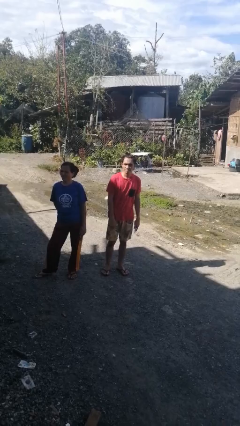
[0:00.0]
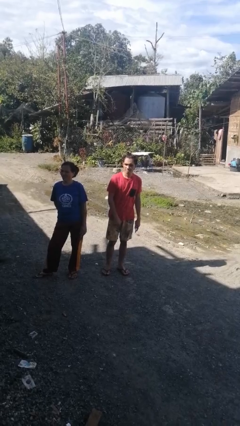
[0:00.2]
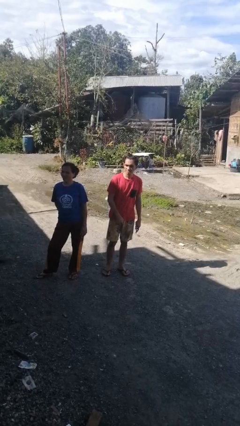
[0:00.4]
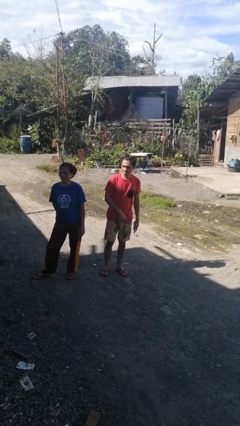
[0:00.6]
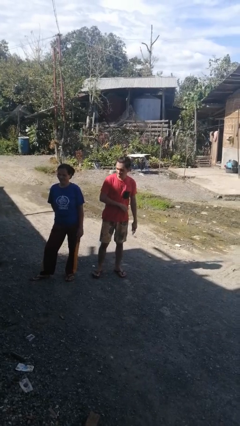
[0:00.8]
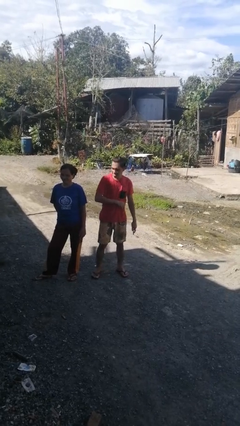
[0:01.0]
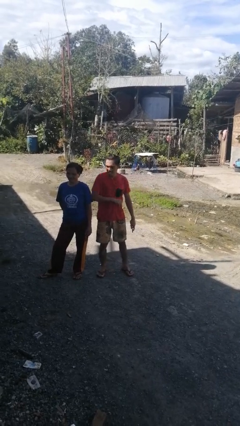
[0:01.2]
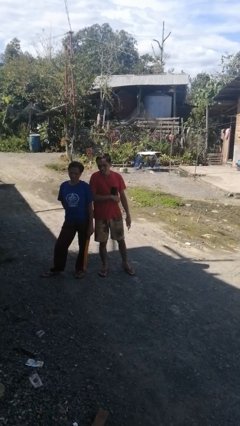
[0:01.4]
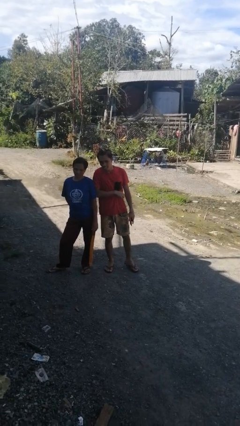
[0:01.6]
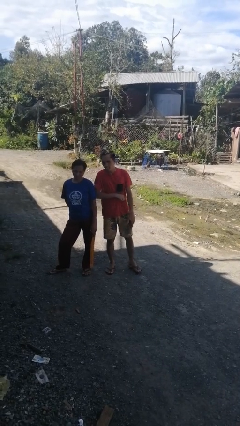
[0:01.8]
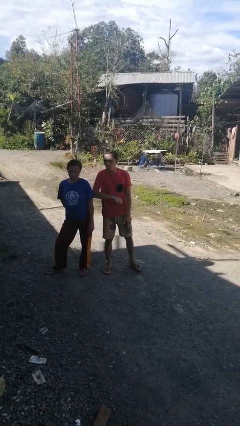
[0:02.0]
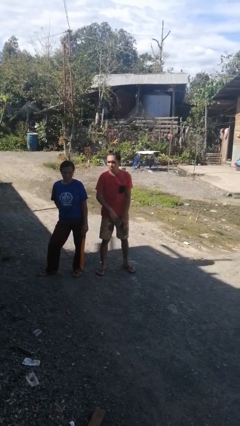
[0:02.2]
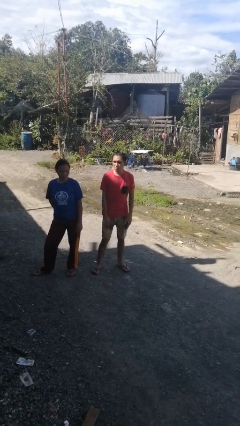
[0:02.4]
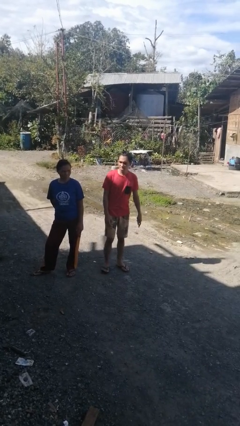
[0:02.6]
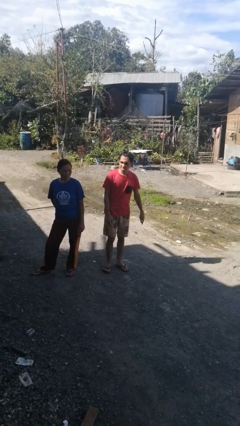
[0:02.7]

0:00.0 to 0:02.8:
person nudges person with elbow

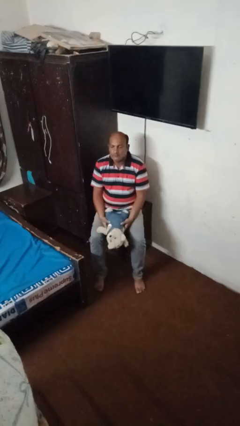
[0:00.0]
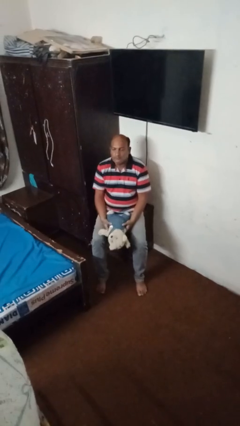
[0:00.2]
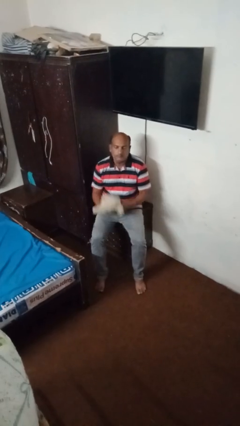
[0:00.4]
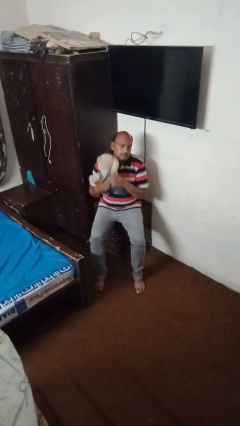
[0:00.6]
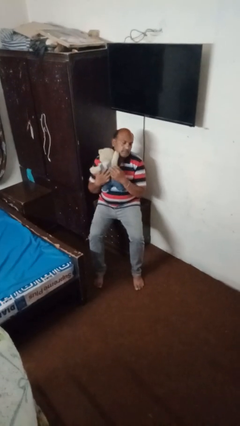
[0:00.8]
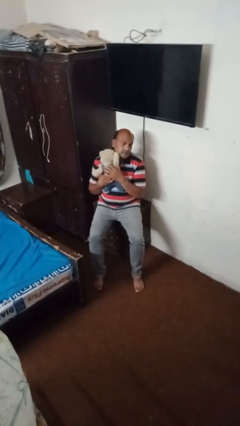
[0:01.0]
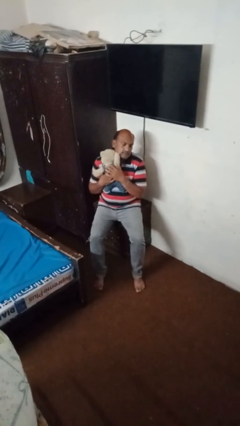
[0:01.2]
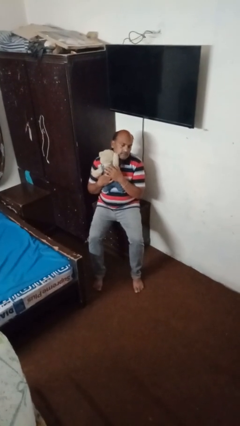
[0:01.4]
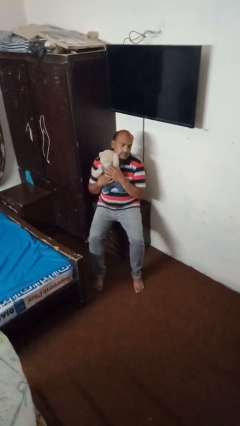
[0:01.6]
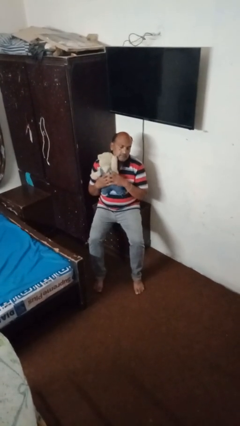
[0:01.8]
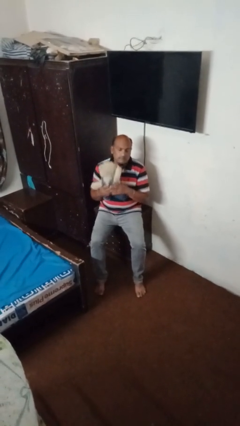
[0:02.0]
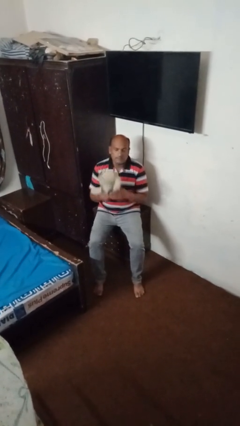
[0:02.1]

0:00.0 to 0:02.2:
person hugs stuffed animal

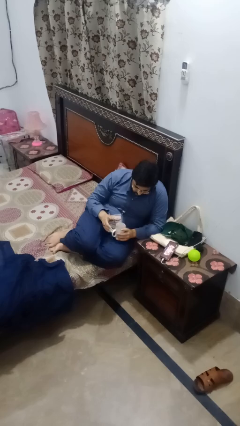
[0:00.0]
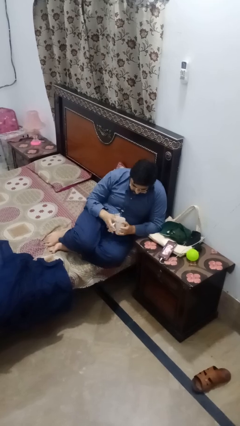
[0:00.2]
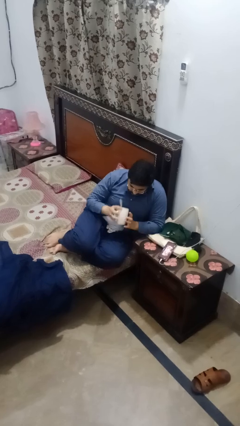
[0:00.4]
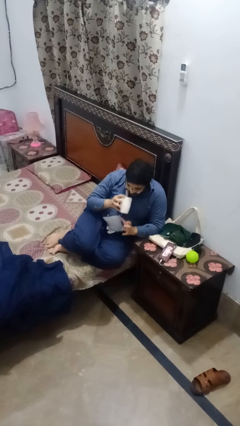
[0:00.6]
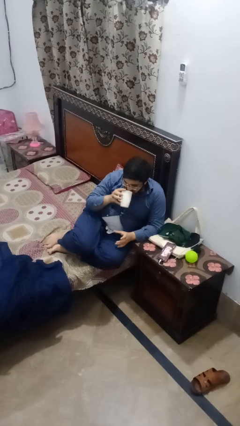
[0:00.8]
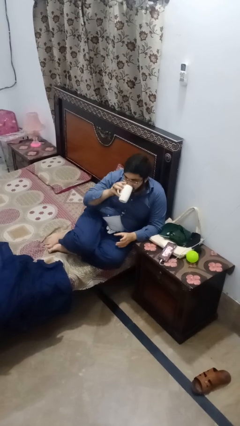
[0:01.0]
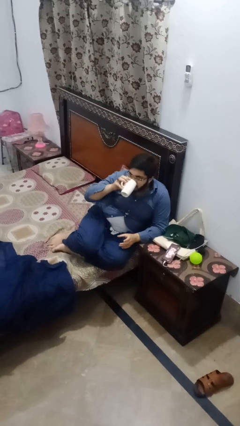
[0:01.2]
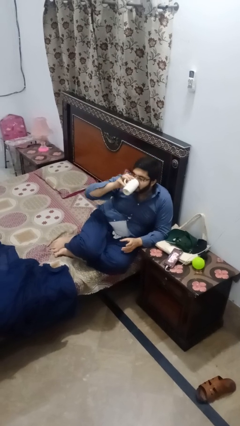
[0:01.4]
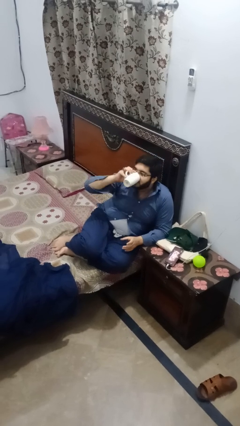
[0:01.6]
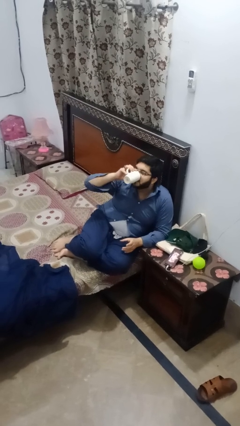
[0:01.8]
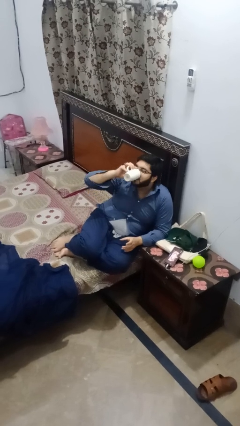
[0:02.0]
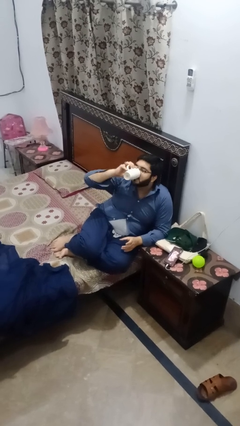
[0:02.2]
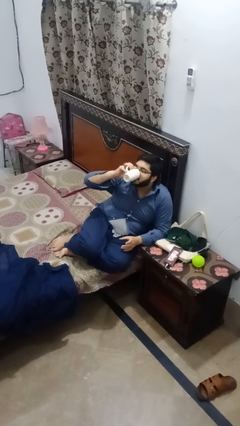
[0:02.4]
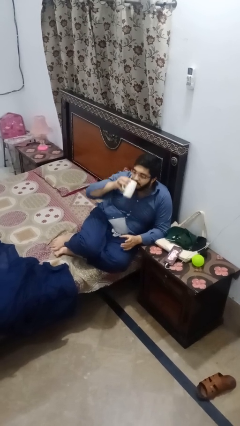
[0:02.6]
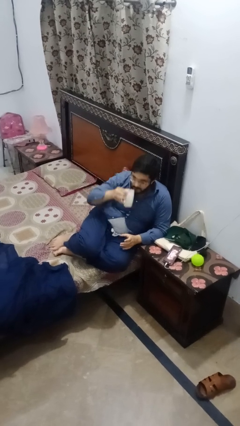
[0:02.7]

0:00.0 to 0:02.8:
person drinks from mug

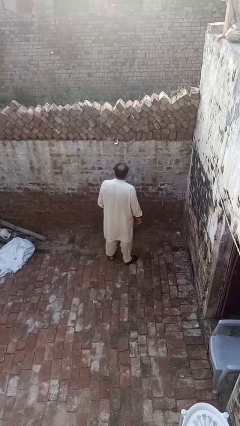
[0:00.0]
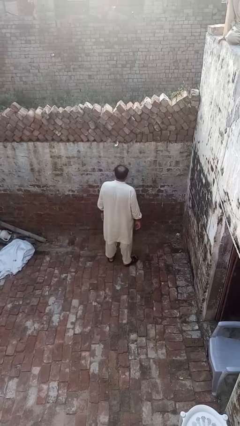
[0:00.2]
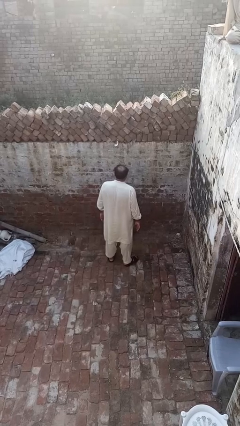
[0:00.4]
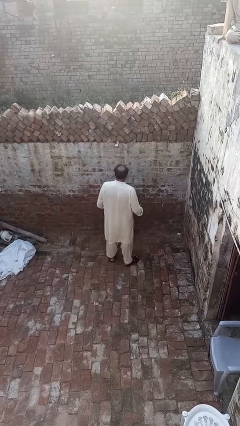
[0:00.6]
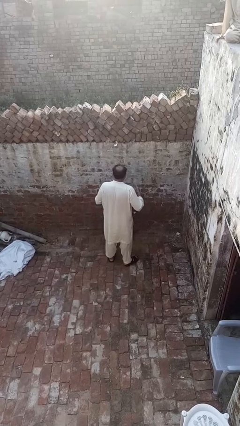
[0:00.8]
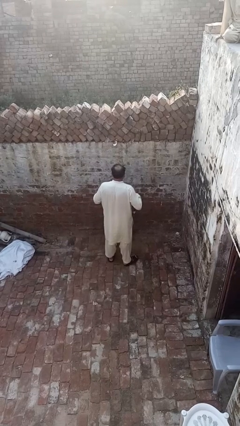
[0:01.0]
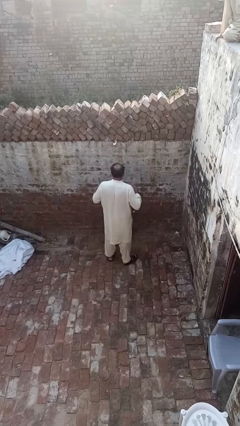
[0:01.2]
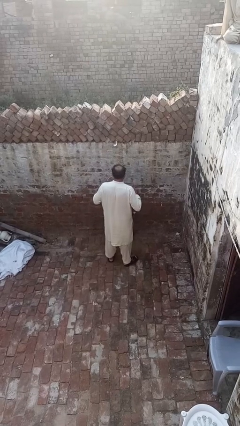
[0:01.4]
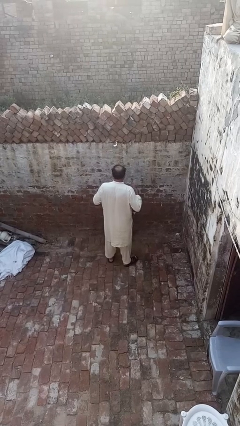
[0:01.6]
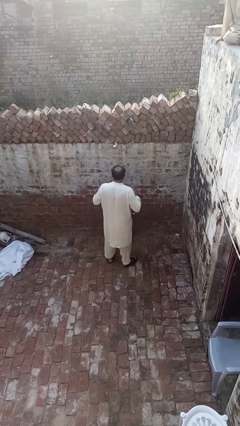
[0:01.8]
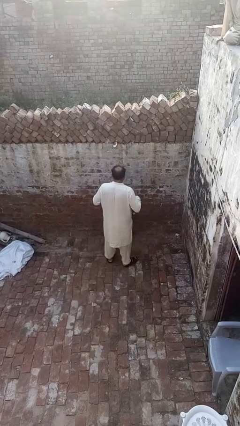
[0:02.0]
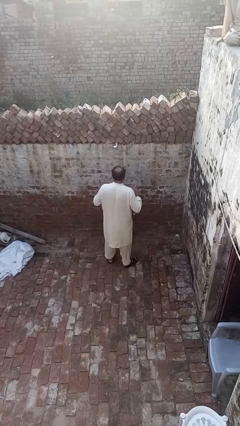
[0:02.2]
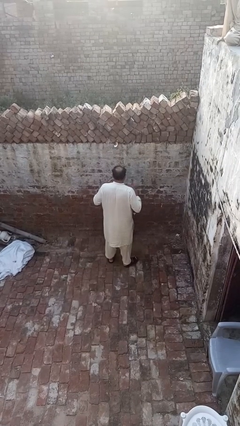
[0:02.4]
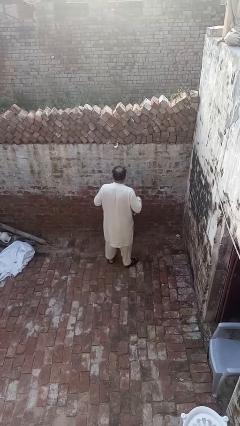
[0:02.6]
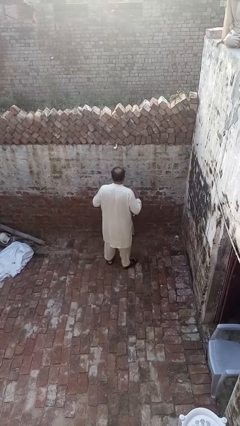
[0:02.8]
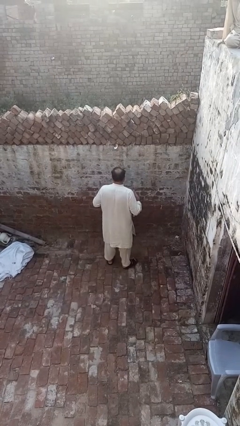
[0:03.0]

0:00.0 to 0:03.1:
person drums on chest

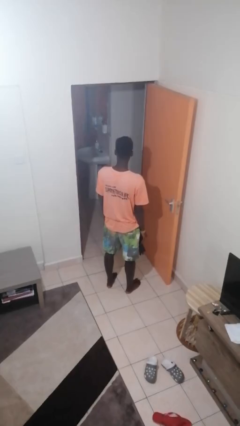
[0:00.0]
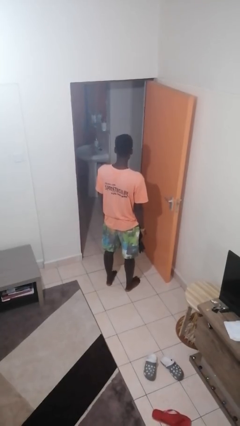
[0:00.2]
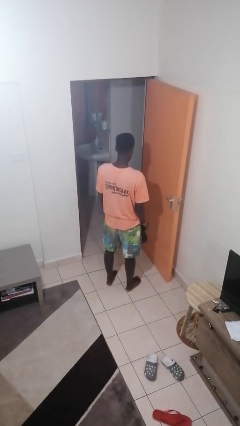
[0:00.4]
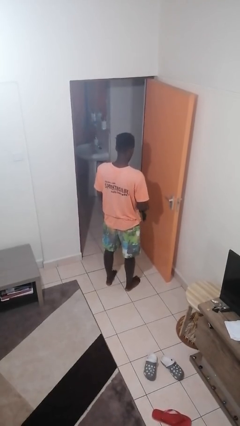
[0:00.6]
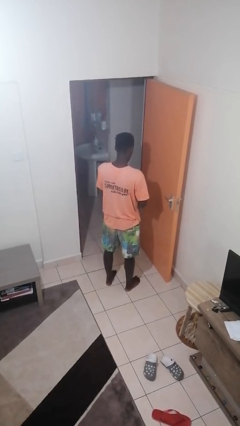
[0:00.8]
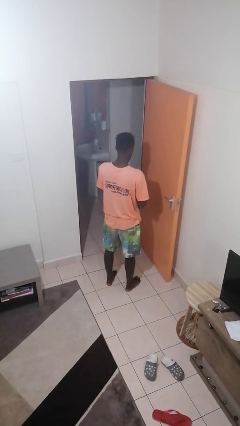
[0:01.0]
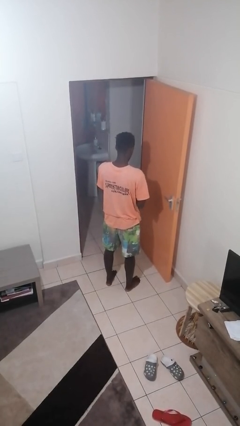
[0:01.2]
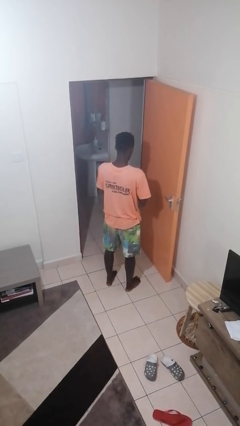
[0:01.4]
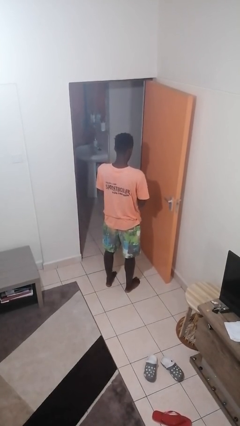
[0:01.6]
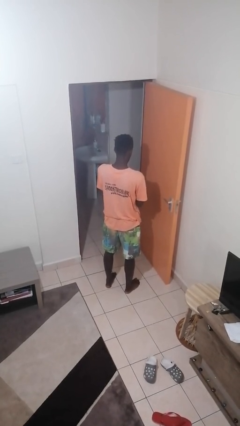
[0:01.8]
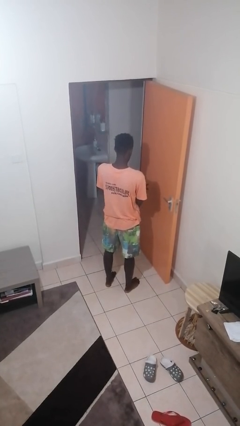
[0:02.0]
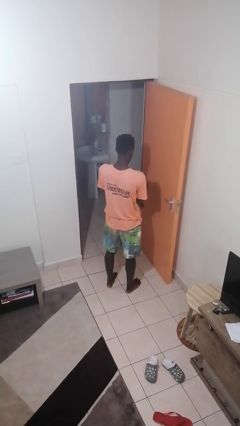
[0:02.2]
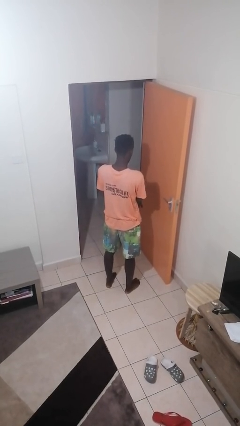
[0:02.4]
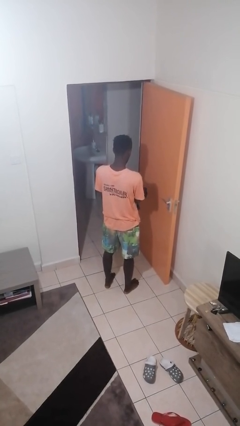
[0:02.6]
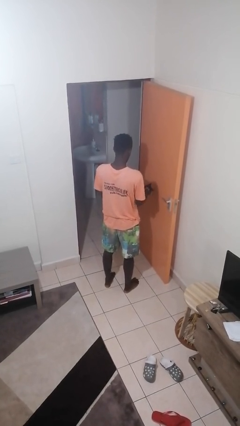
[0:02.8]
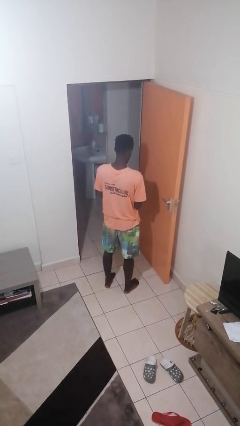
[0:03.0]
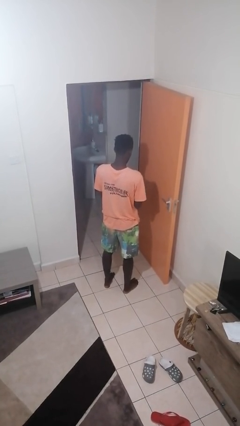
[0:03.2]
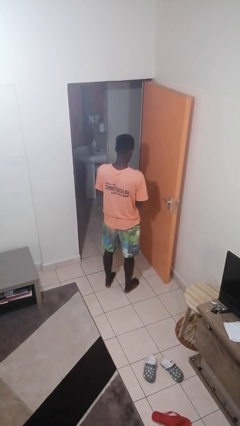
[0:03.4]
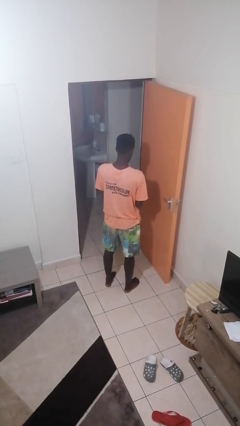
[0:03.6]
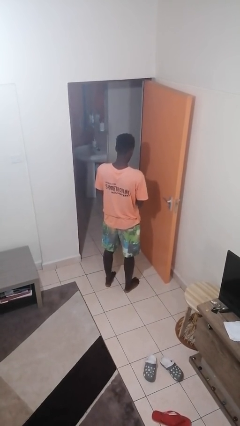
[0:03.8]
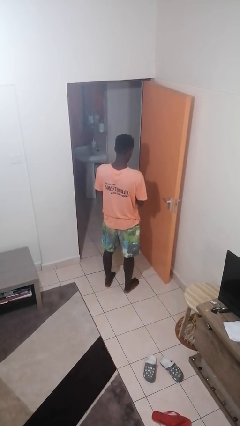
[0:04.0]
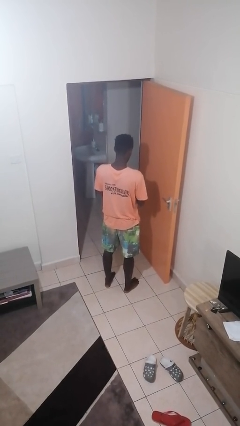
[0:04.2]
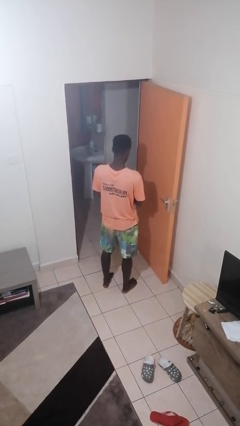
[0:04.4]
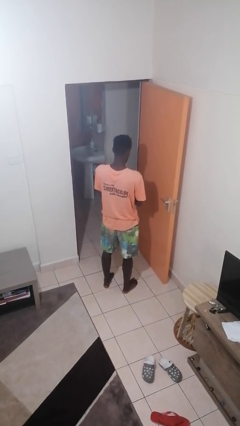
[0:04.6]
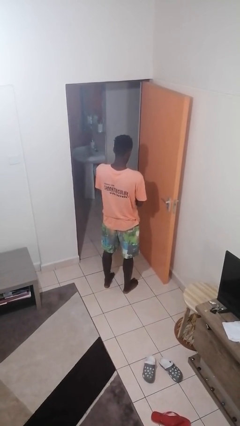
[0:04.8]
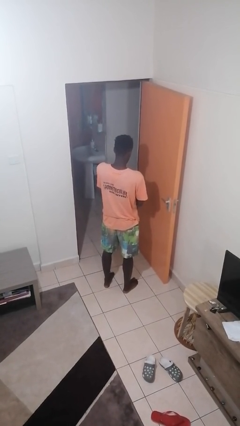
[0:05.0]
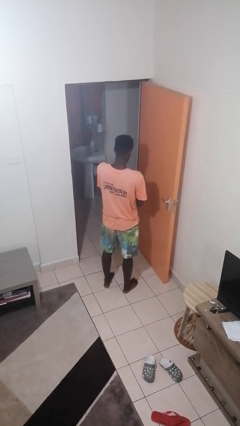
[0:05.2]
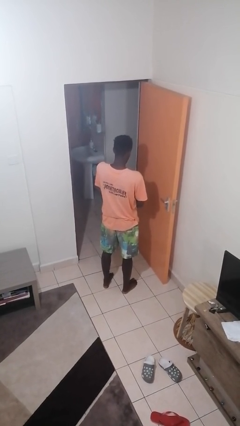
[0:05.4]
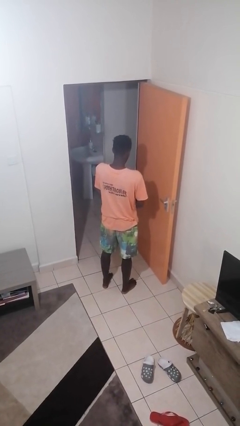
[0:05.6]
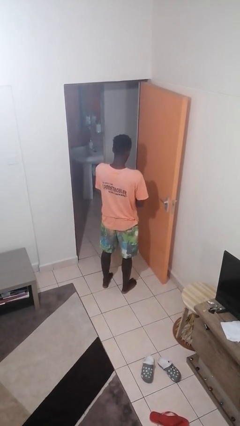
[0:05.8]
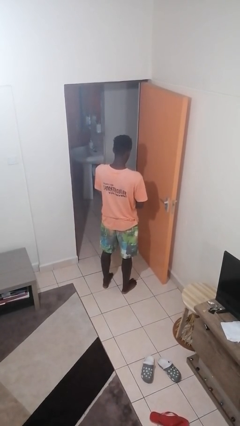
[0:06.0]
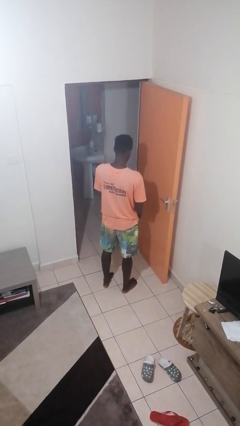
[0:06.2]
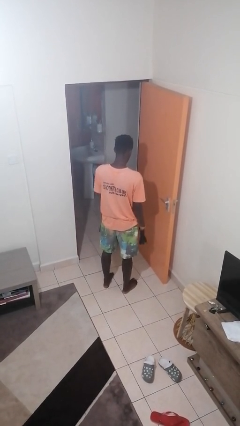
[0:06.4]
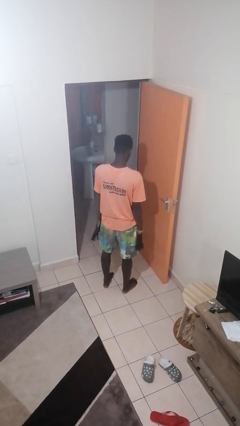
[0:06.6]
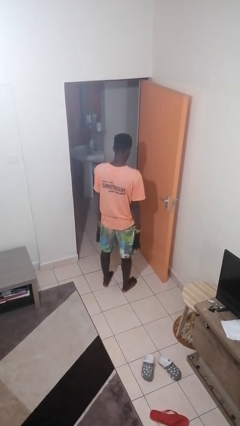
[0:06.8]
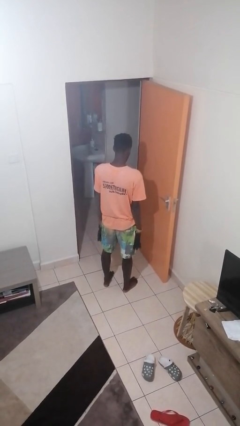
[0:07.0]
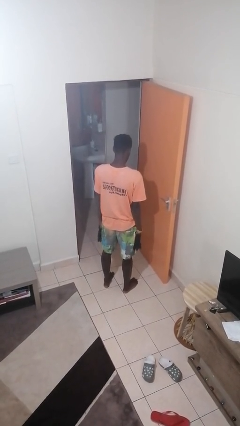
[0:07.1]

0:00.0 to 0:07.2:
person puts on gloves
